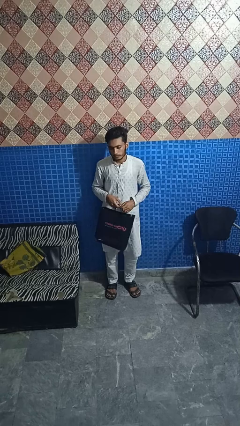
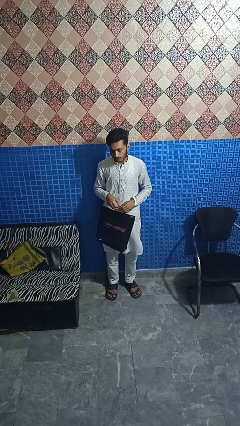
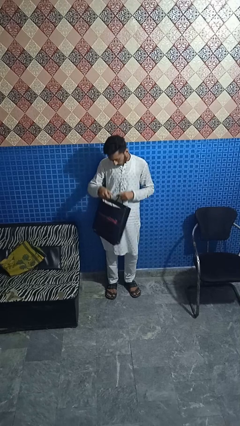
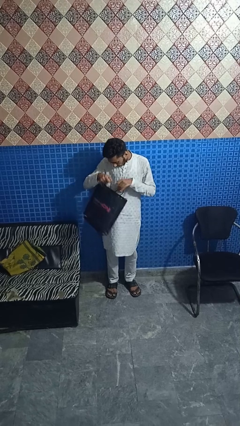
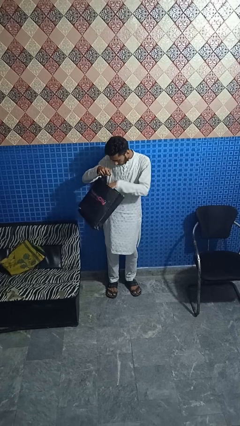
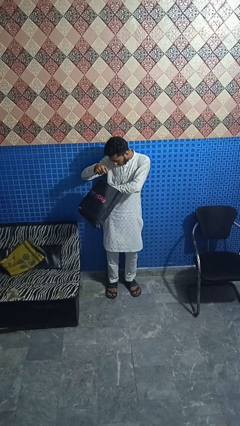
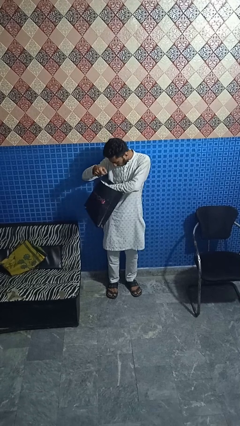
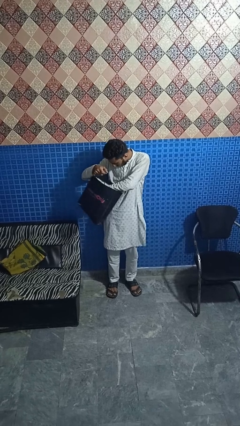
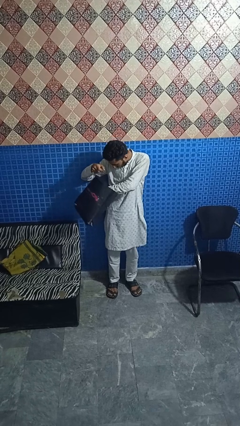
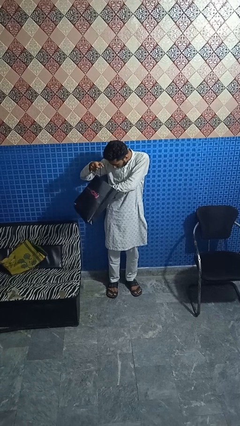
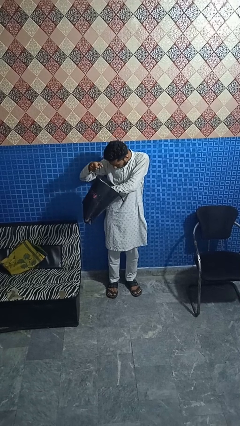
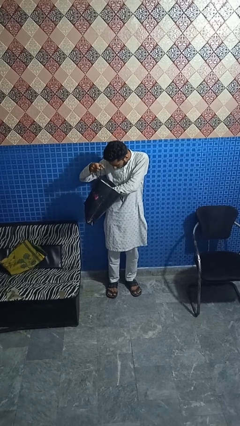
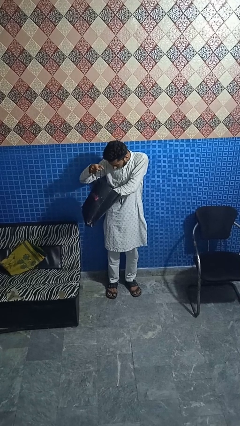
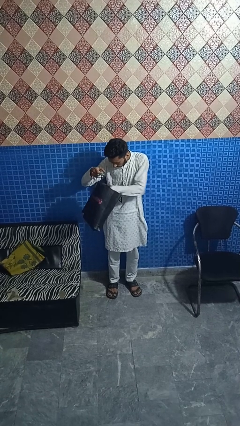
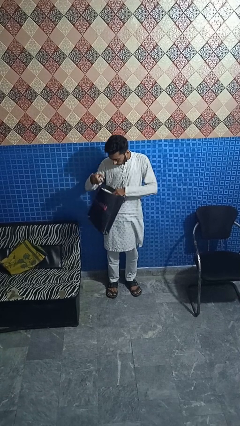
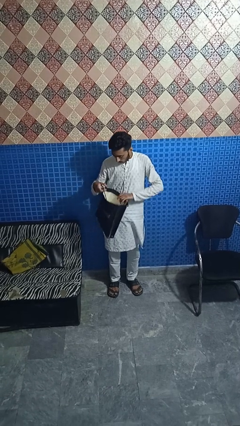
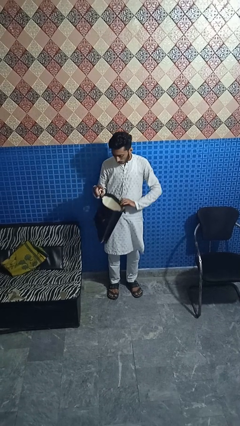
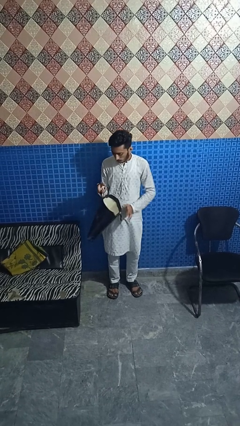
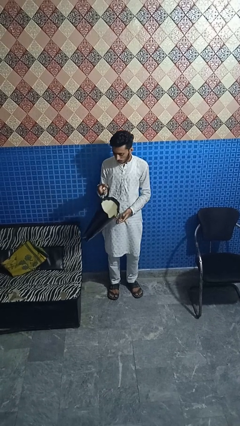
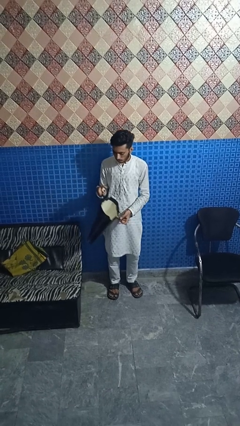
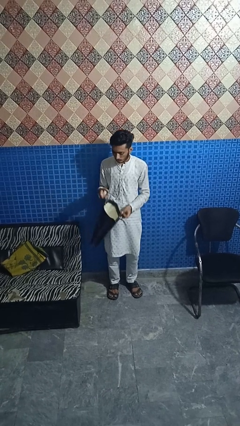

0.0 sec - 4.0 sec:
person searches in bag

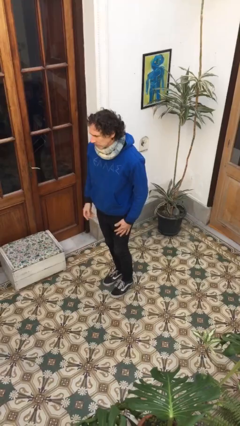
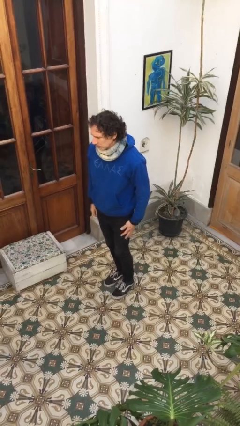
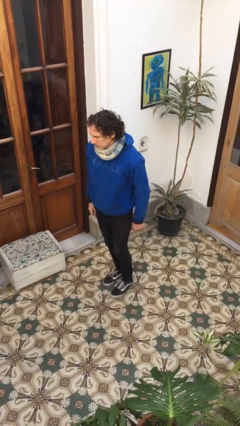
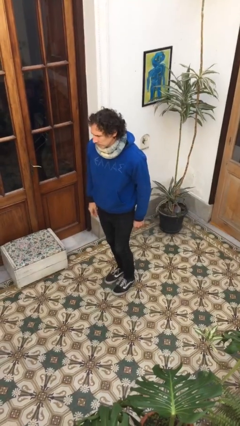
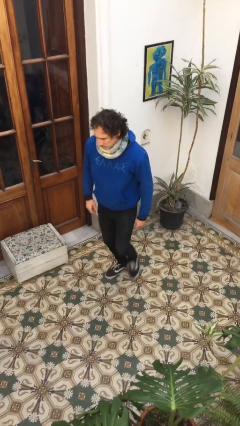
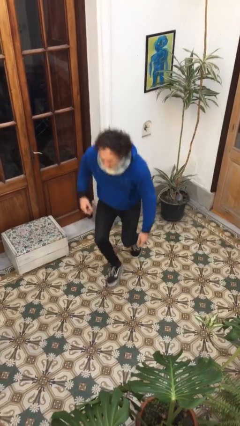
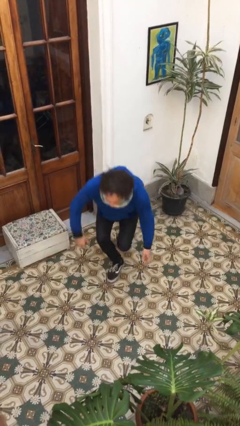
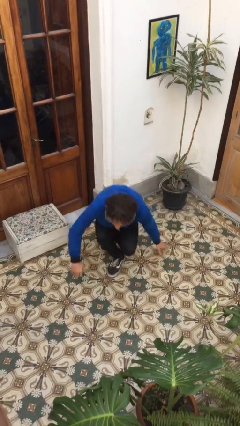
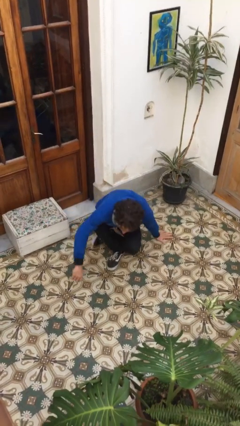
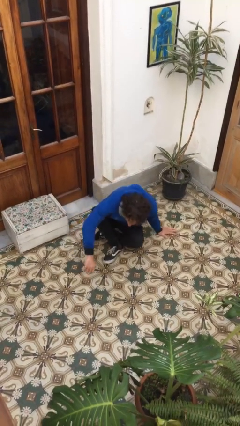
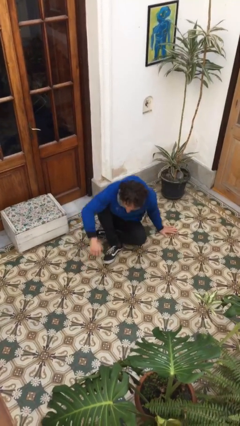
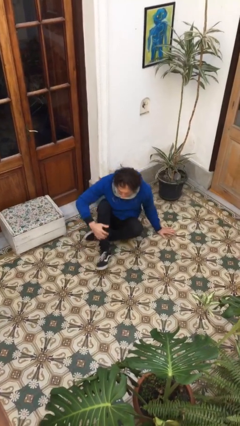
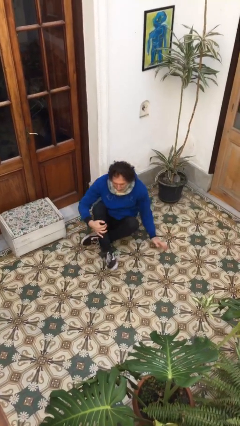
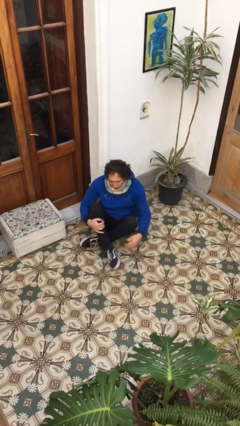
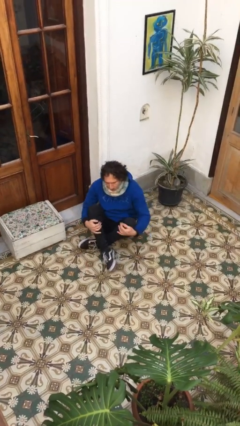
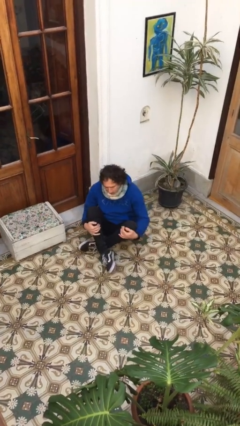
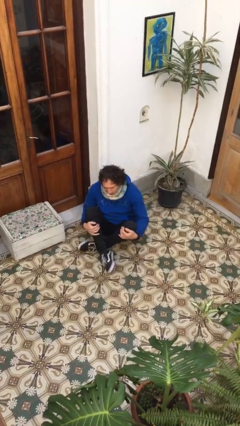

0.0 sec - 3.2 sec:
person sits crisscross

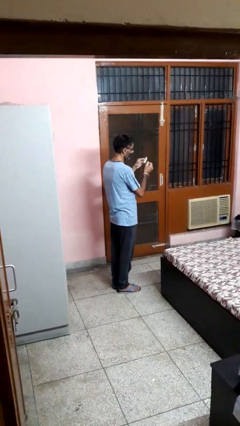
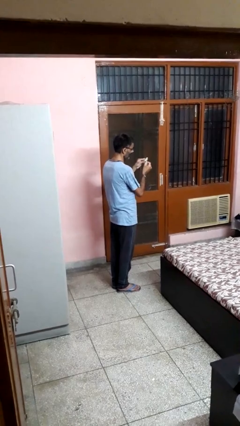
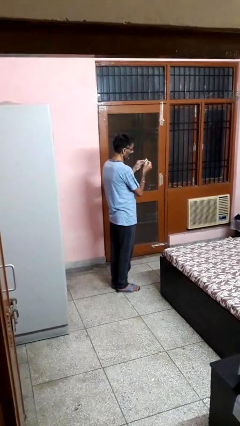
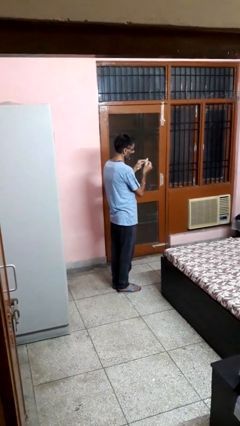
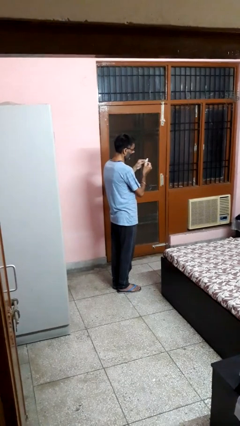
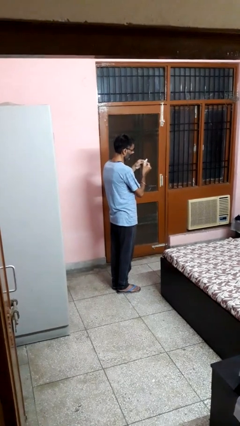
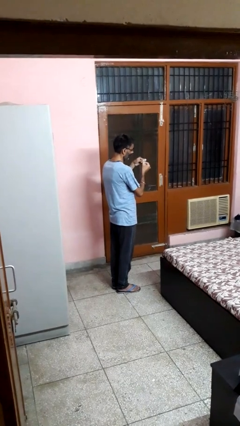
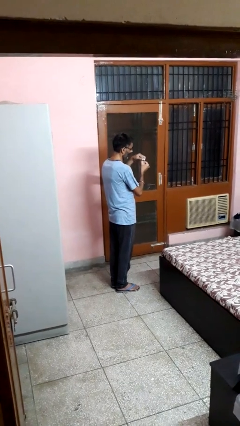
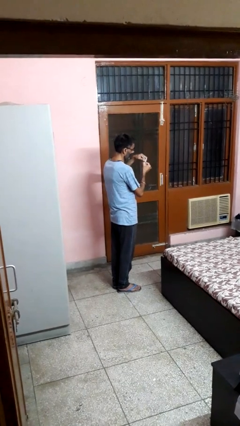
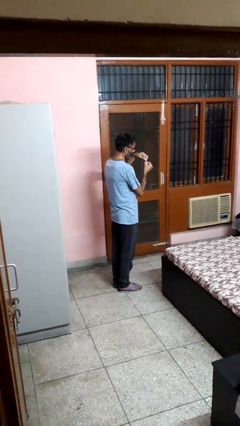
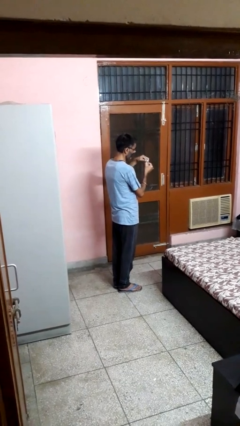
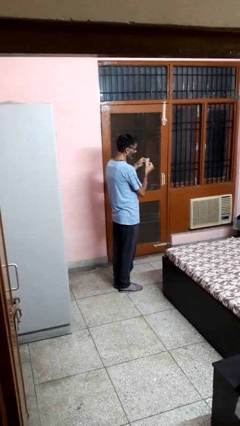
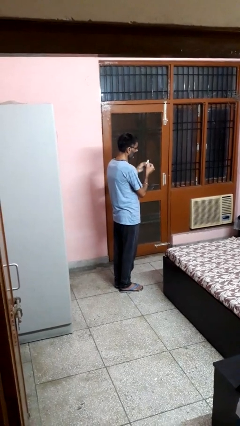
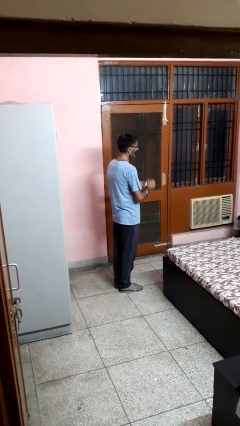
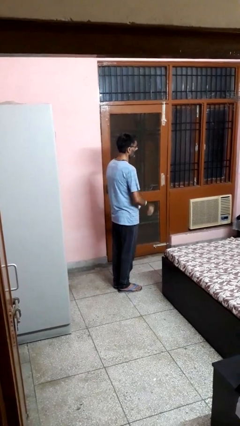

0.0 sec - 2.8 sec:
person files fingernails

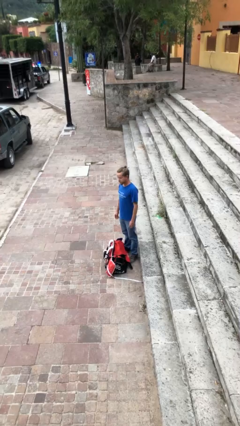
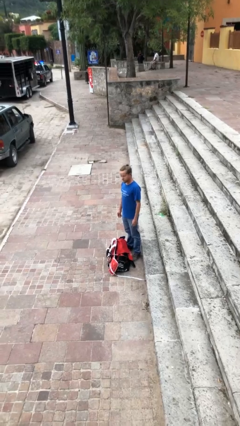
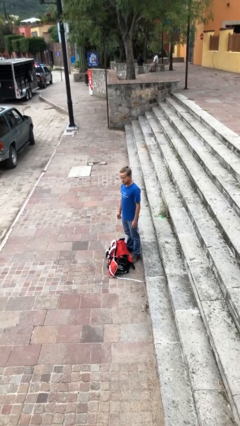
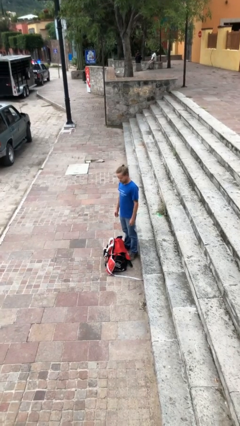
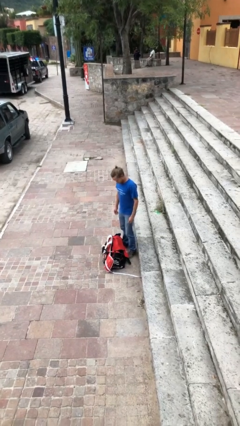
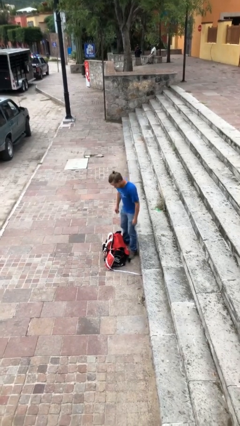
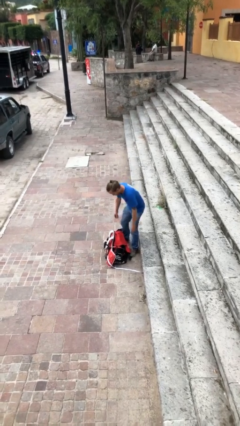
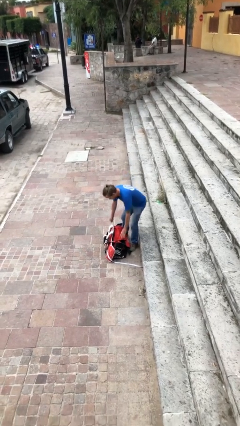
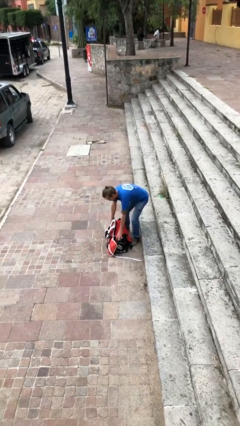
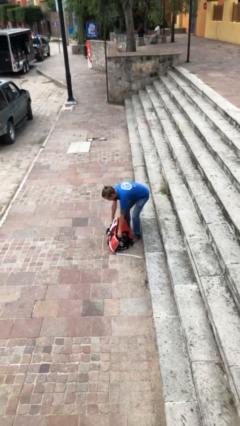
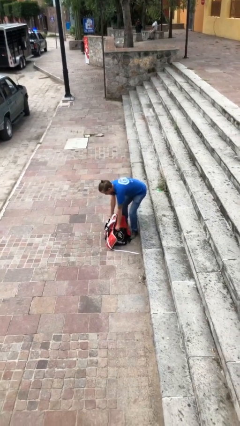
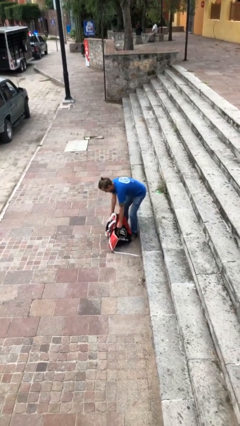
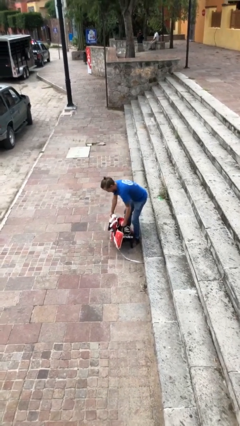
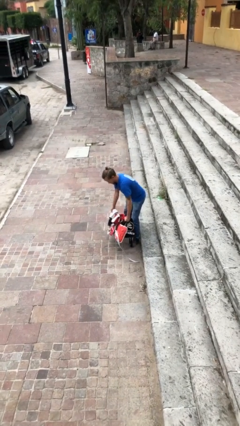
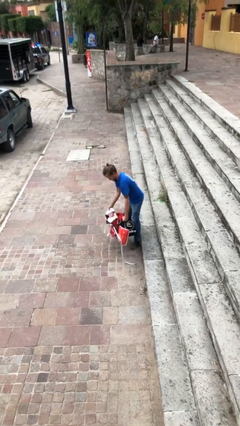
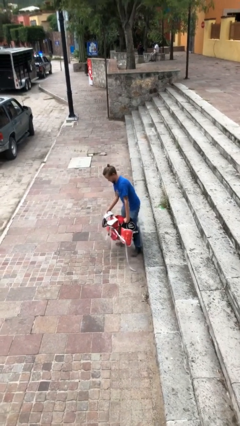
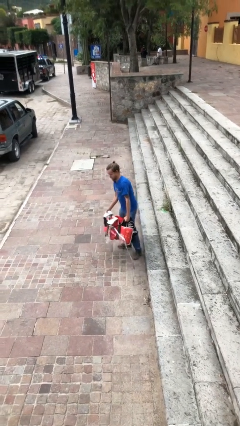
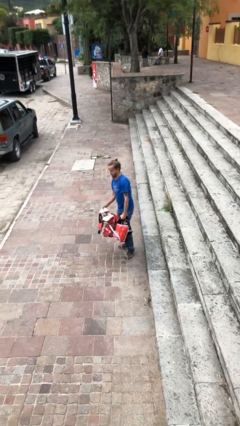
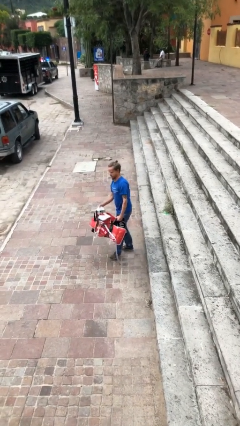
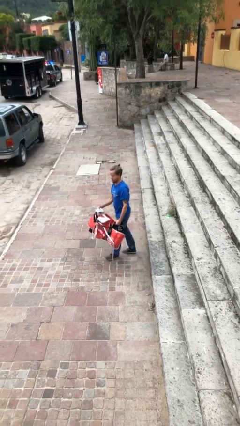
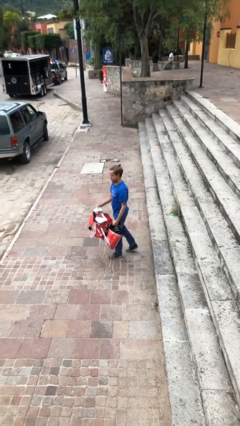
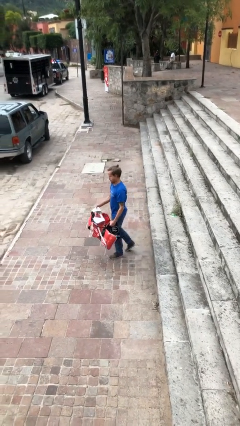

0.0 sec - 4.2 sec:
person picks up object from floor

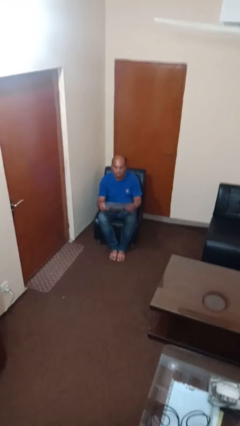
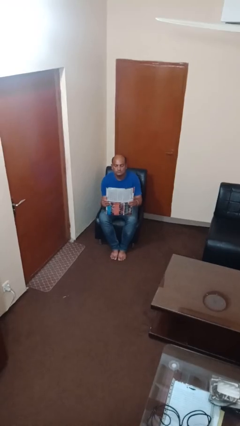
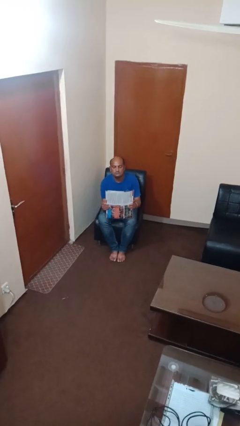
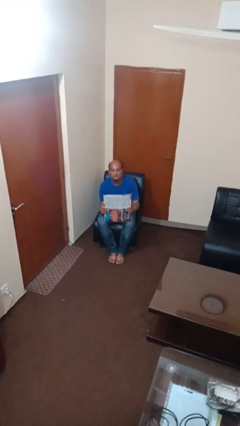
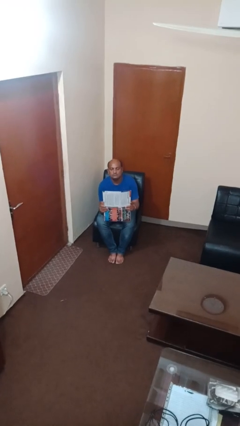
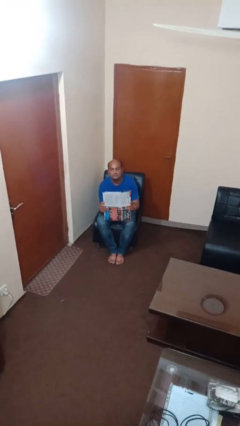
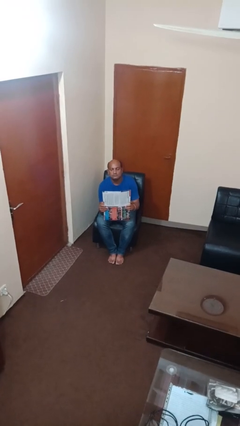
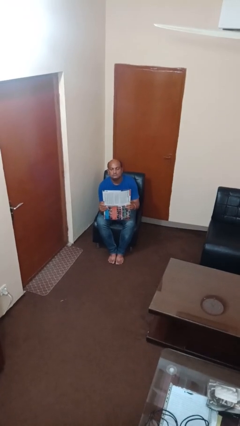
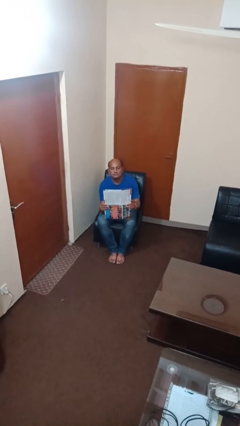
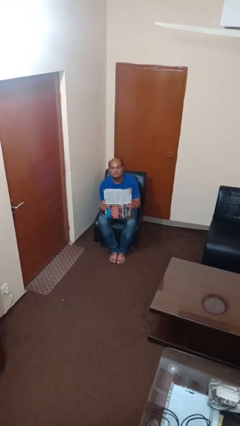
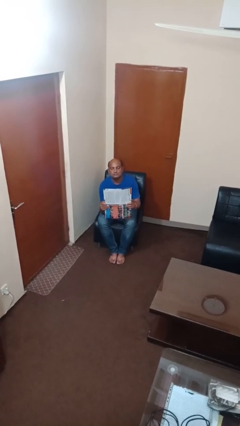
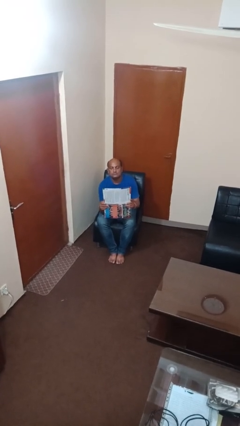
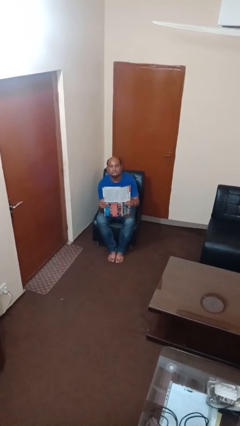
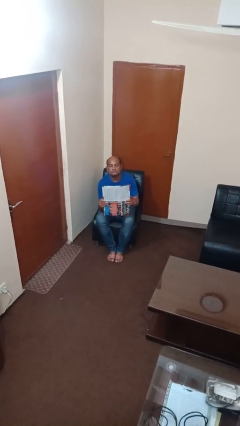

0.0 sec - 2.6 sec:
person reads newspaper

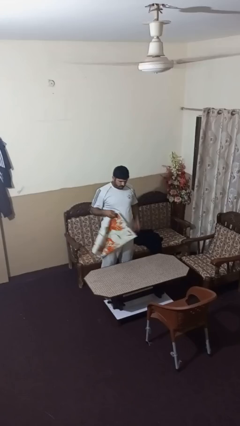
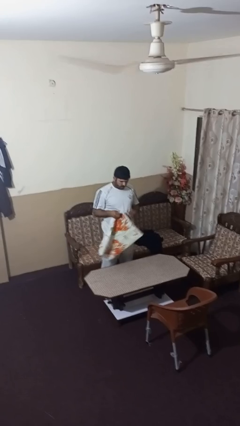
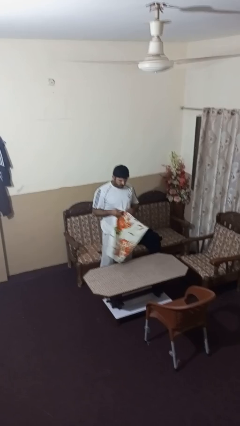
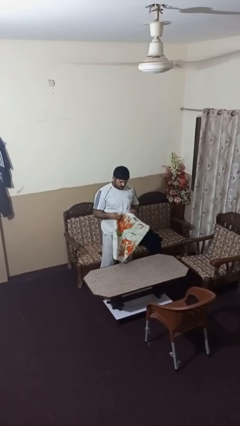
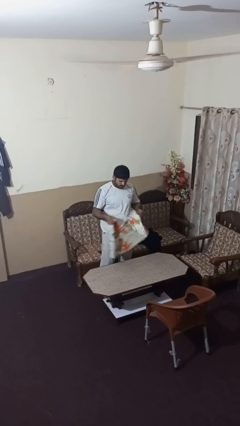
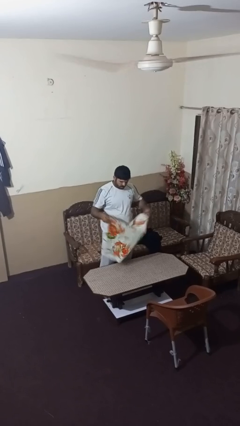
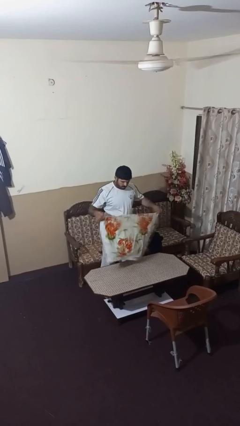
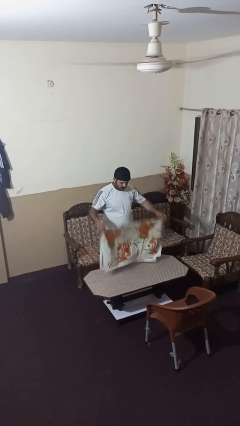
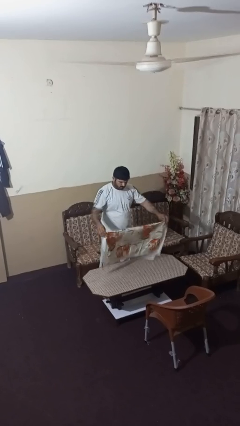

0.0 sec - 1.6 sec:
person spreads tablecloth
